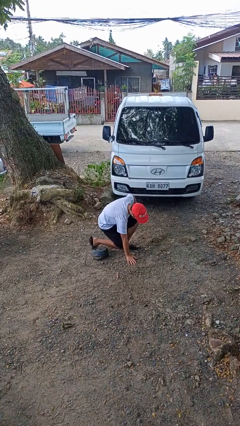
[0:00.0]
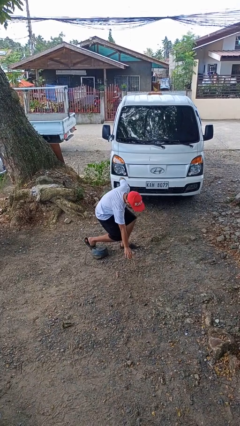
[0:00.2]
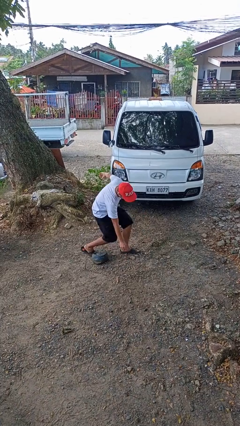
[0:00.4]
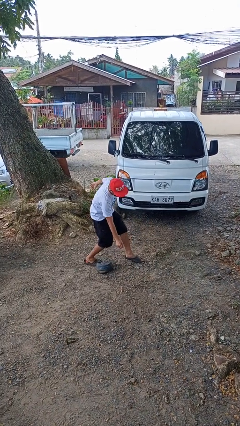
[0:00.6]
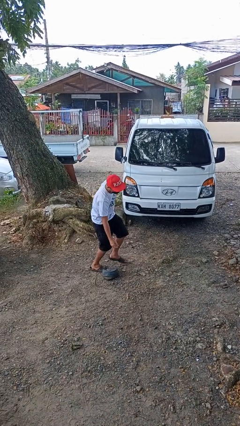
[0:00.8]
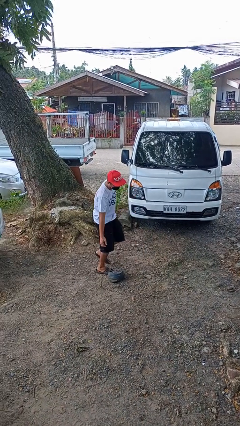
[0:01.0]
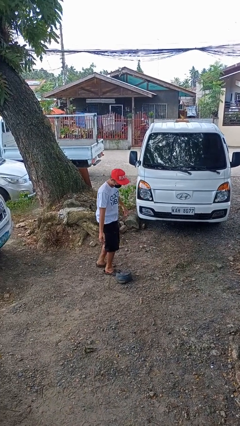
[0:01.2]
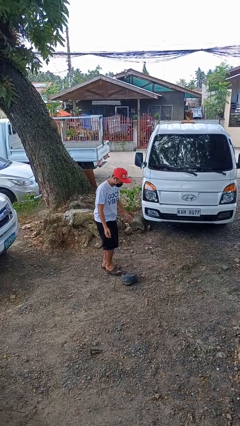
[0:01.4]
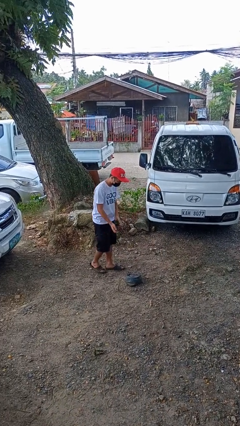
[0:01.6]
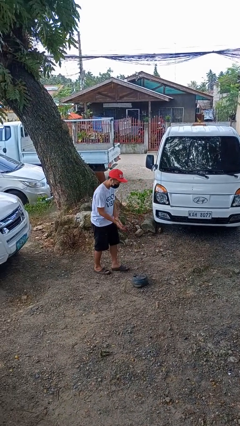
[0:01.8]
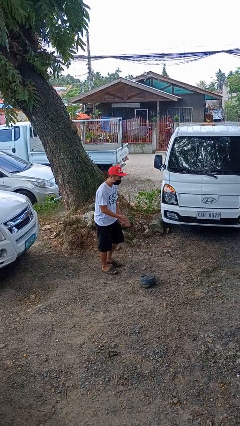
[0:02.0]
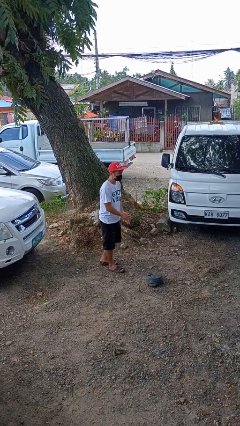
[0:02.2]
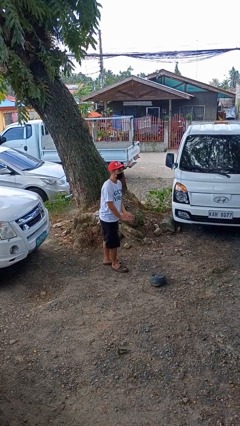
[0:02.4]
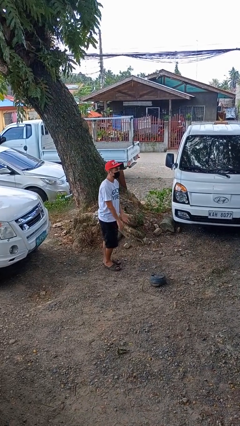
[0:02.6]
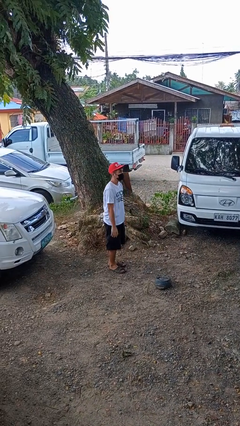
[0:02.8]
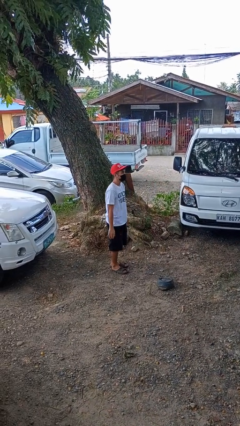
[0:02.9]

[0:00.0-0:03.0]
person stands up from floor

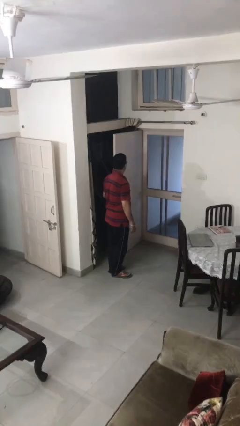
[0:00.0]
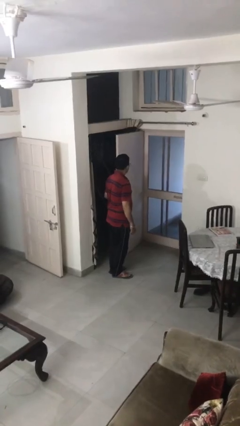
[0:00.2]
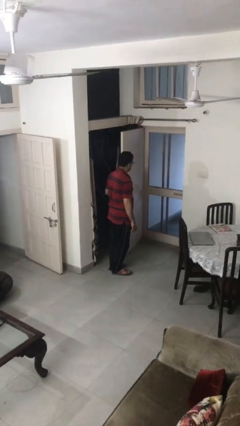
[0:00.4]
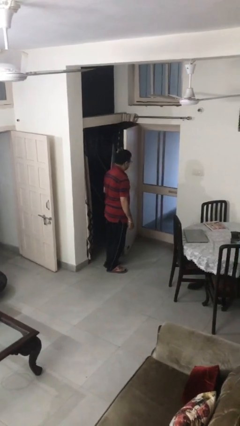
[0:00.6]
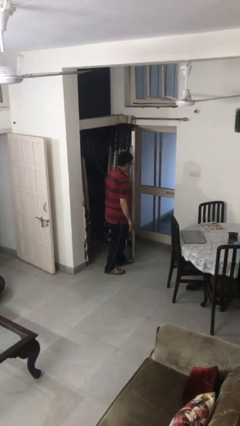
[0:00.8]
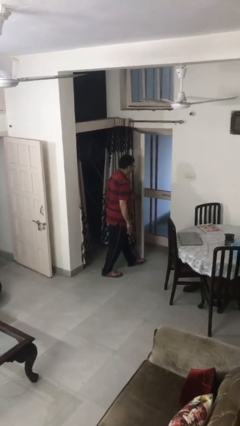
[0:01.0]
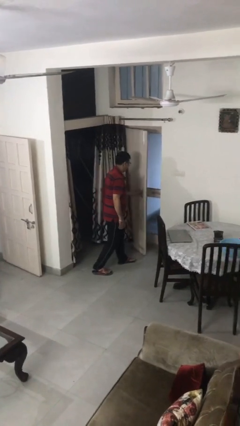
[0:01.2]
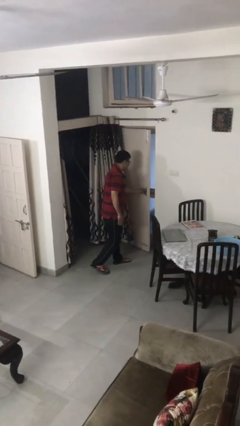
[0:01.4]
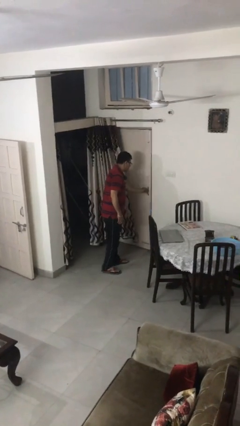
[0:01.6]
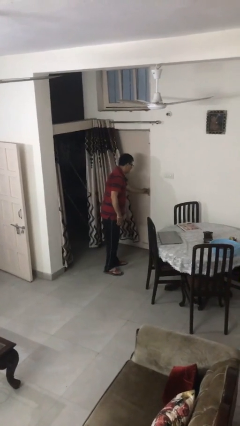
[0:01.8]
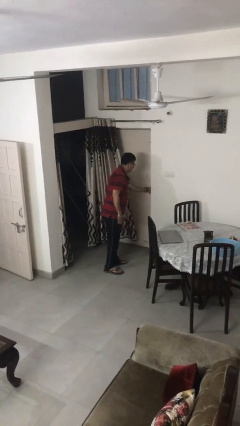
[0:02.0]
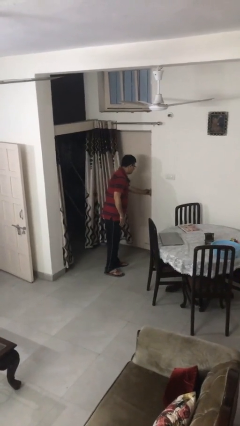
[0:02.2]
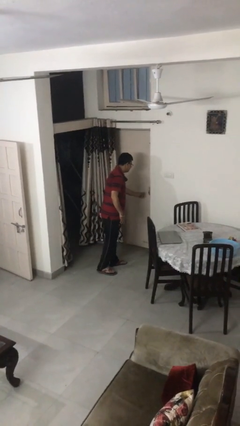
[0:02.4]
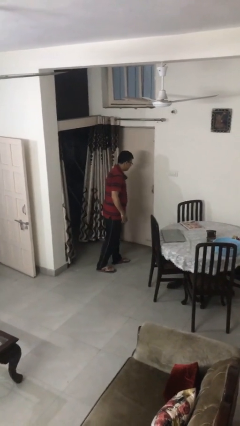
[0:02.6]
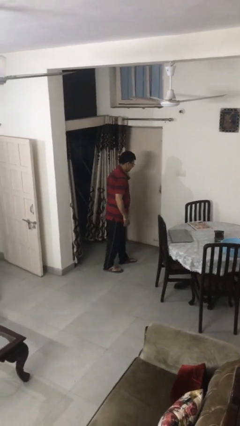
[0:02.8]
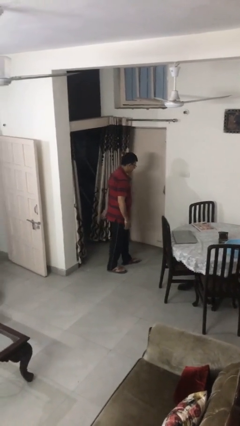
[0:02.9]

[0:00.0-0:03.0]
person closes facility door

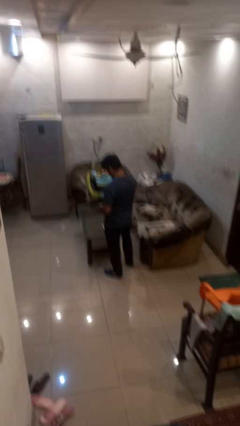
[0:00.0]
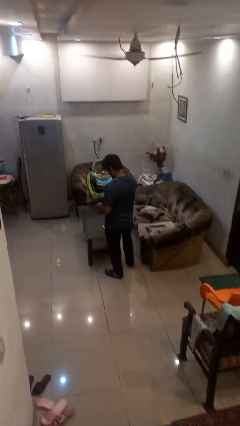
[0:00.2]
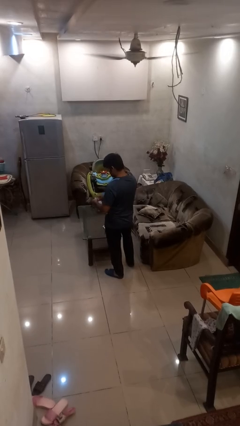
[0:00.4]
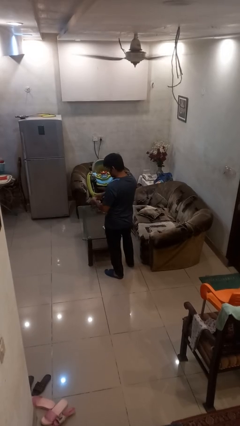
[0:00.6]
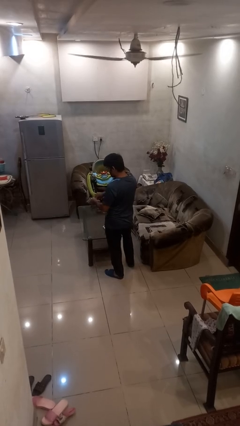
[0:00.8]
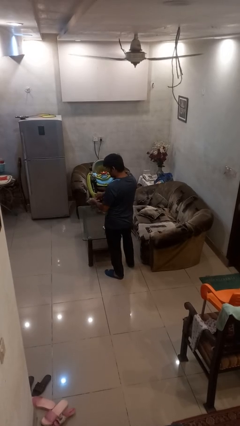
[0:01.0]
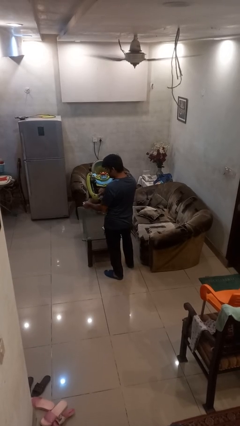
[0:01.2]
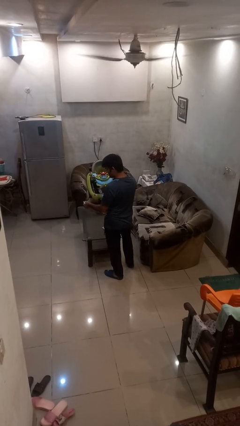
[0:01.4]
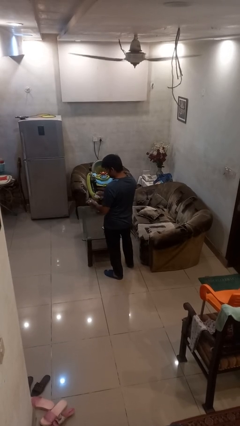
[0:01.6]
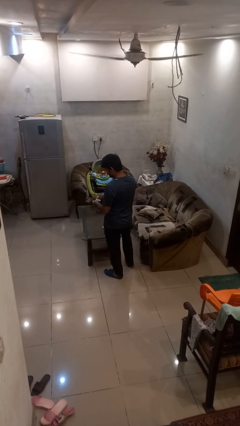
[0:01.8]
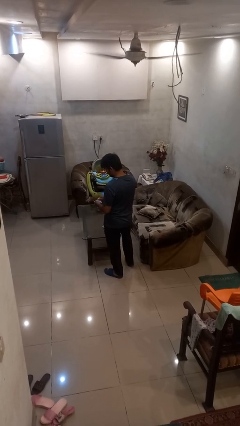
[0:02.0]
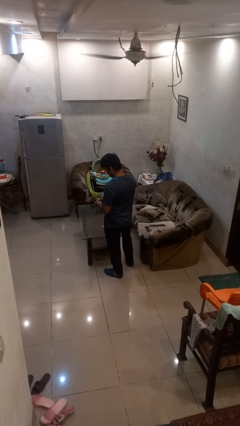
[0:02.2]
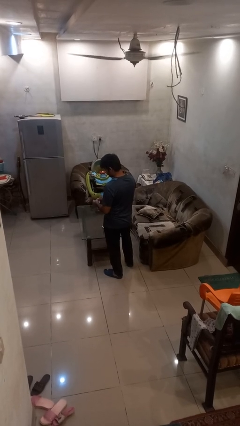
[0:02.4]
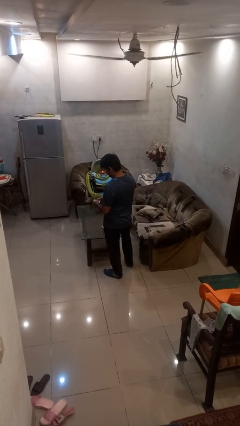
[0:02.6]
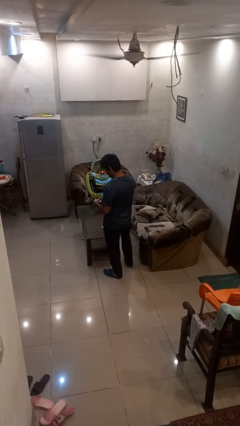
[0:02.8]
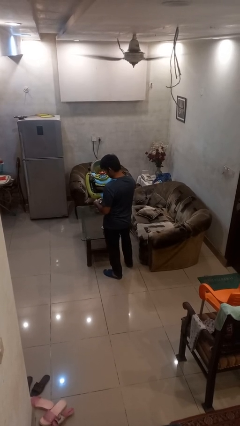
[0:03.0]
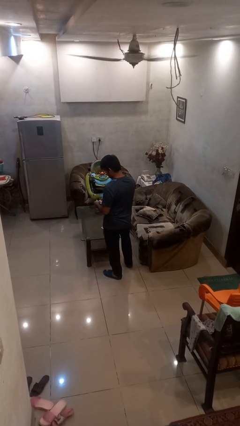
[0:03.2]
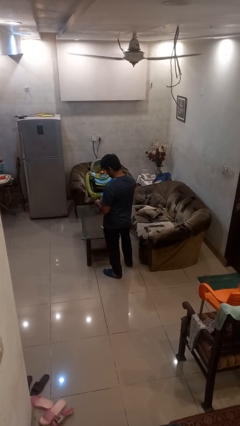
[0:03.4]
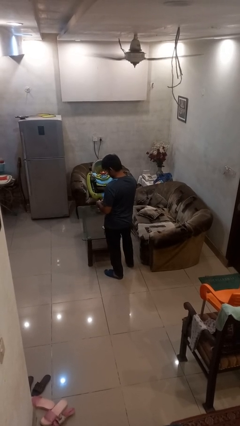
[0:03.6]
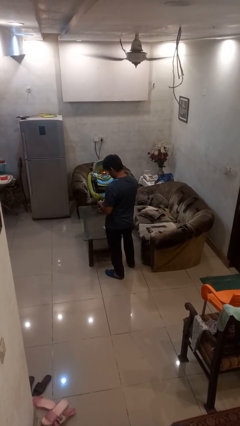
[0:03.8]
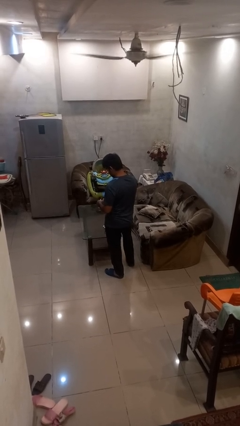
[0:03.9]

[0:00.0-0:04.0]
person tears paper

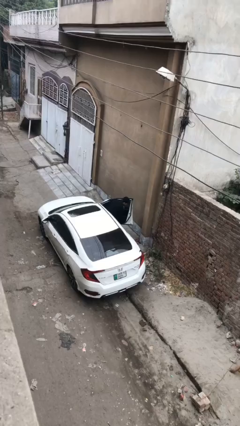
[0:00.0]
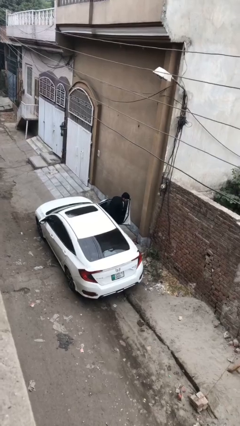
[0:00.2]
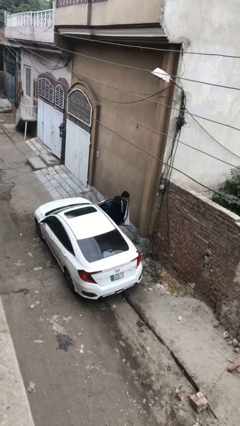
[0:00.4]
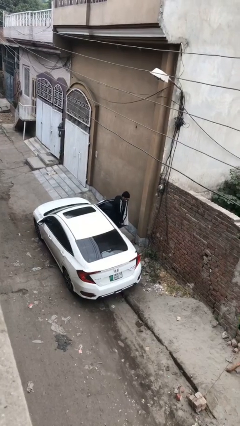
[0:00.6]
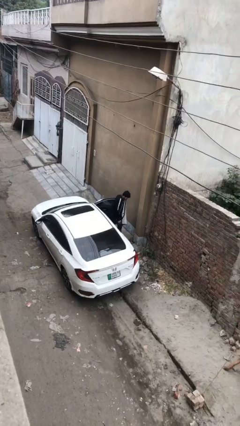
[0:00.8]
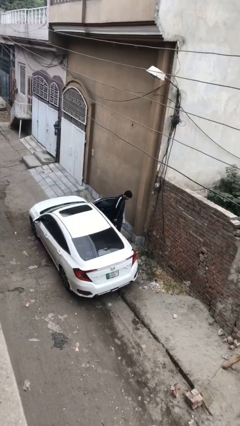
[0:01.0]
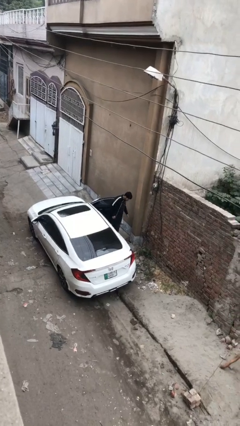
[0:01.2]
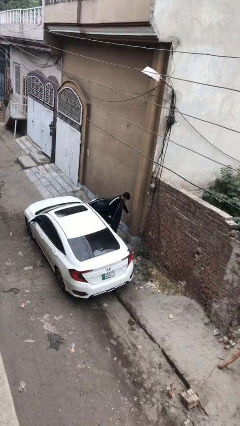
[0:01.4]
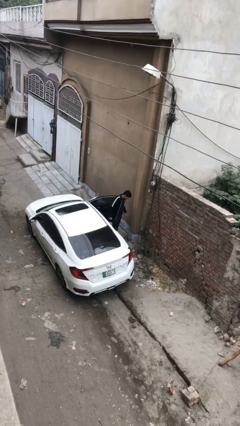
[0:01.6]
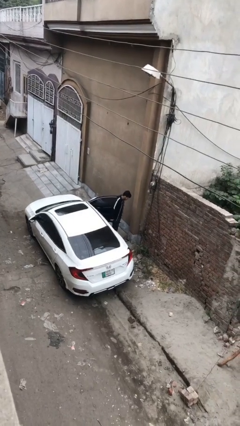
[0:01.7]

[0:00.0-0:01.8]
person exits car

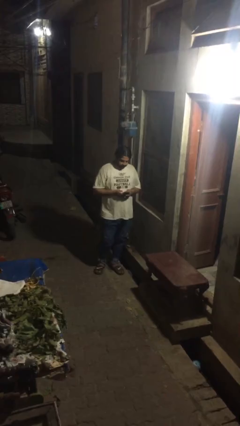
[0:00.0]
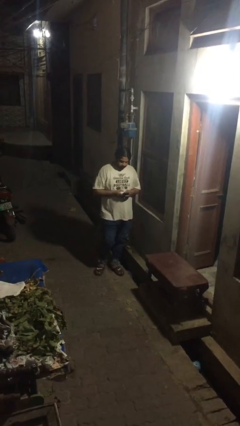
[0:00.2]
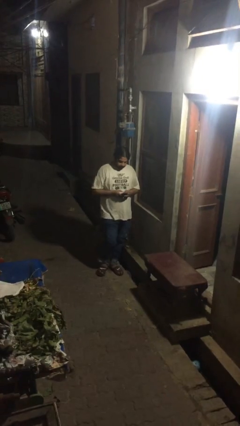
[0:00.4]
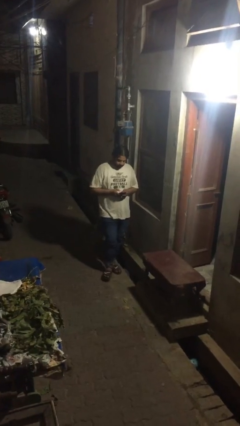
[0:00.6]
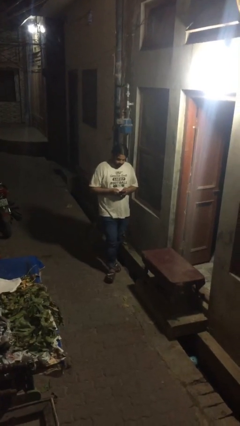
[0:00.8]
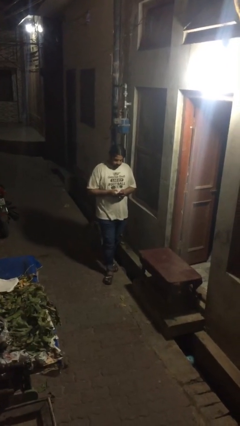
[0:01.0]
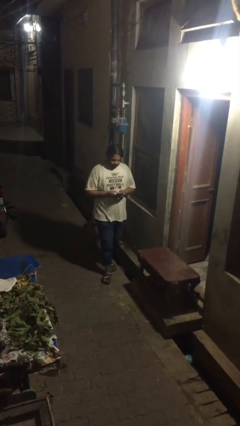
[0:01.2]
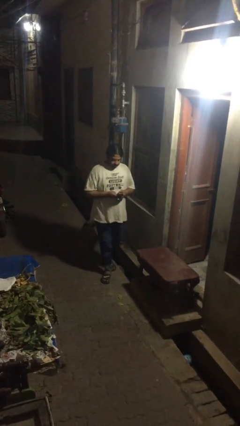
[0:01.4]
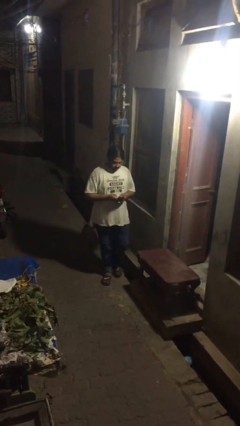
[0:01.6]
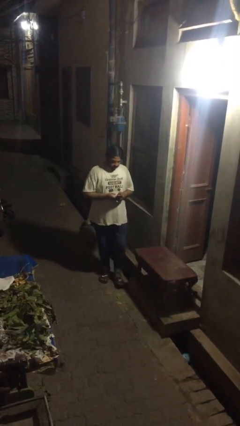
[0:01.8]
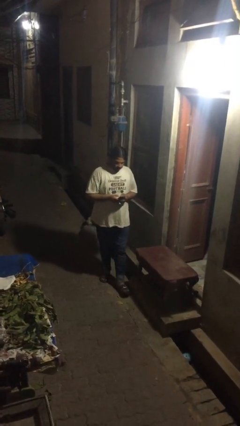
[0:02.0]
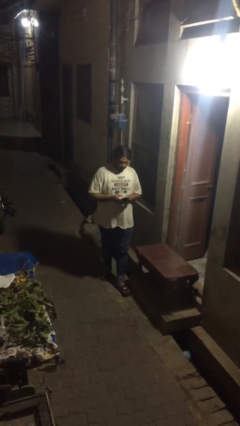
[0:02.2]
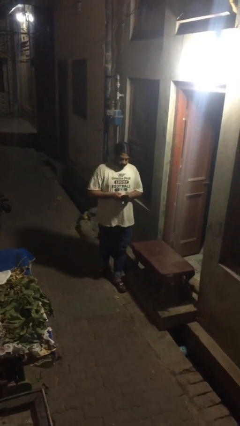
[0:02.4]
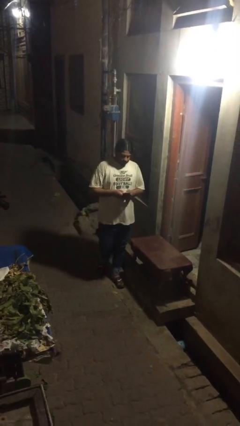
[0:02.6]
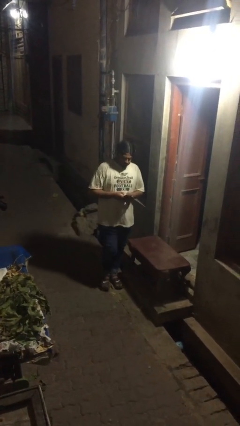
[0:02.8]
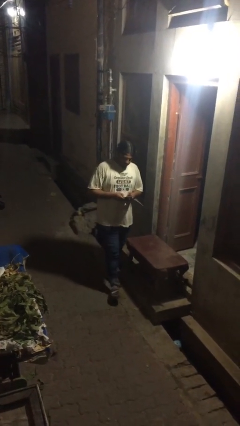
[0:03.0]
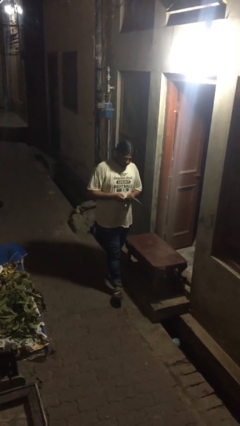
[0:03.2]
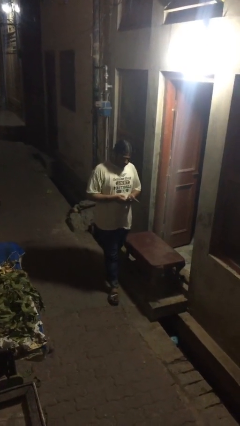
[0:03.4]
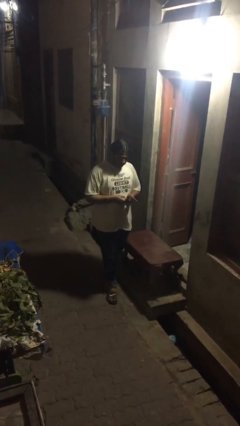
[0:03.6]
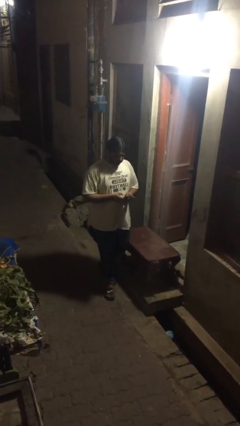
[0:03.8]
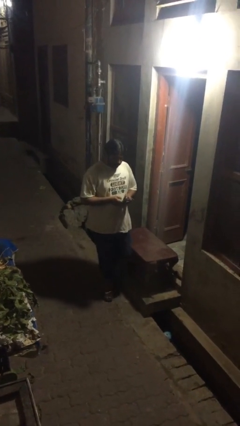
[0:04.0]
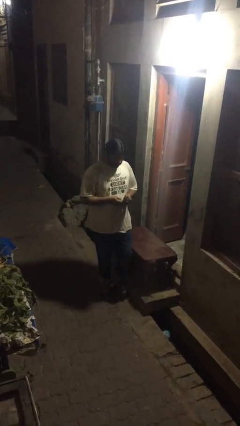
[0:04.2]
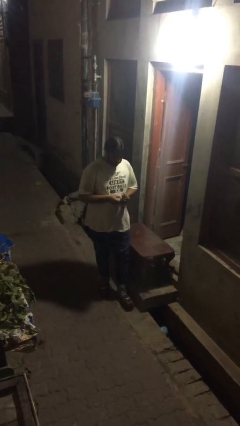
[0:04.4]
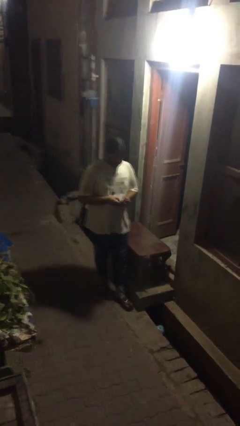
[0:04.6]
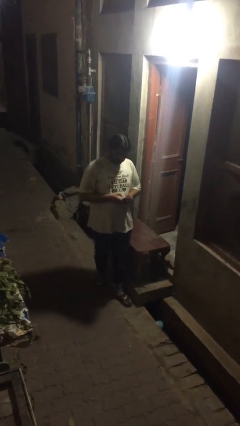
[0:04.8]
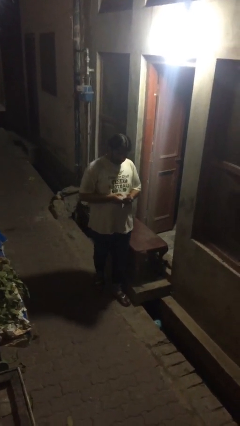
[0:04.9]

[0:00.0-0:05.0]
person texts on phone

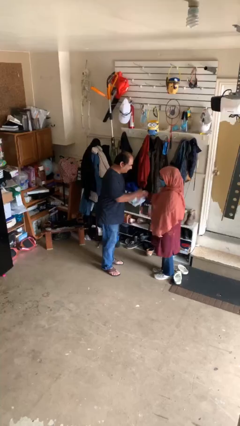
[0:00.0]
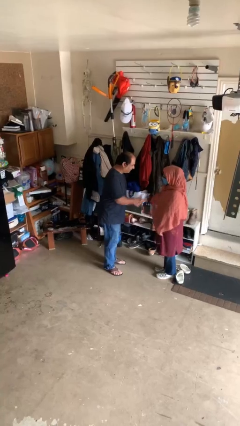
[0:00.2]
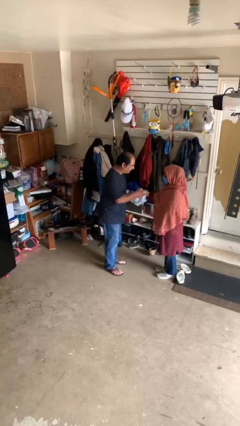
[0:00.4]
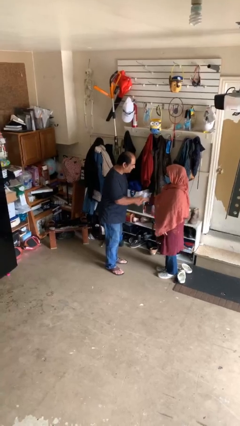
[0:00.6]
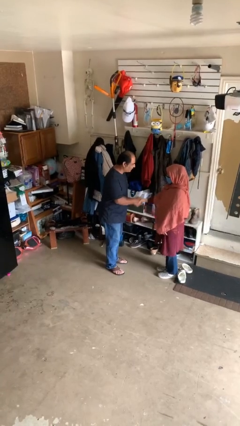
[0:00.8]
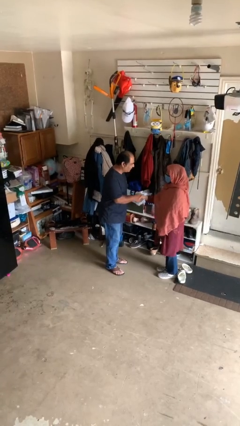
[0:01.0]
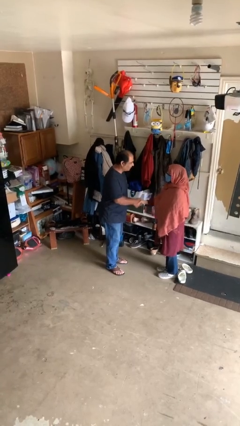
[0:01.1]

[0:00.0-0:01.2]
person shakes hand
